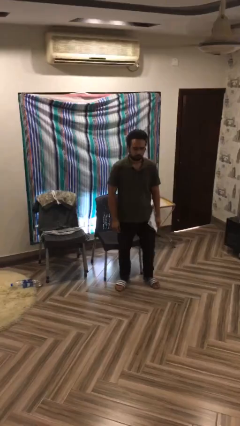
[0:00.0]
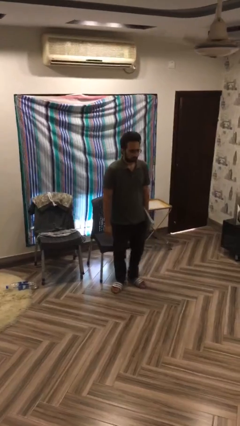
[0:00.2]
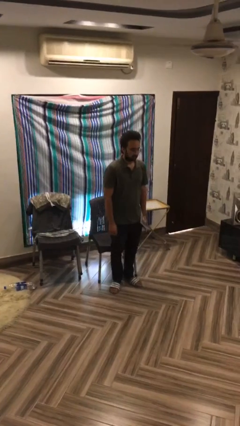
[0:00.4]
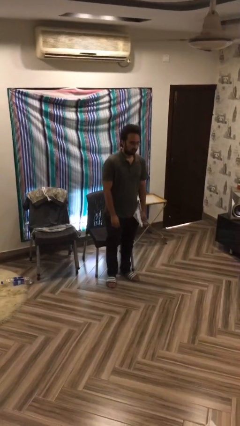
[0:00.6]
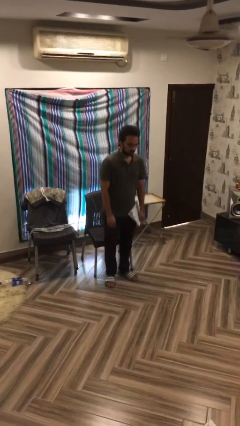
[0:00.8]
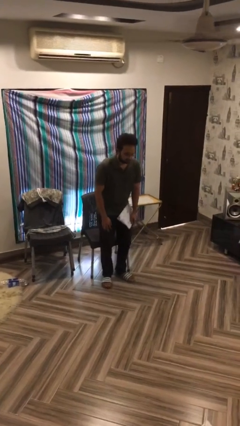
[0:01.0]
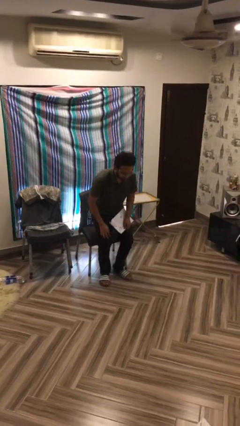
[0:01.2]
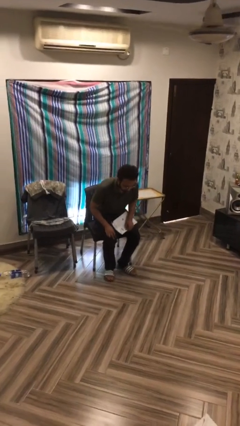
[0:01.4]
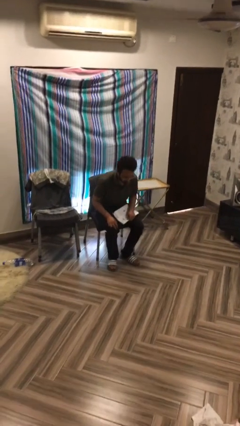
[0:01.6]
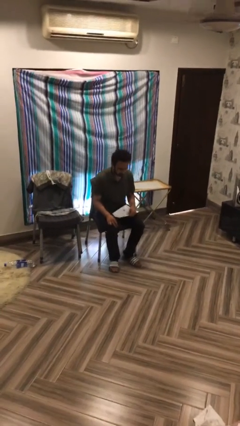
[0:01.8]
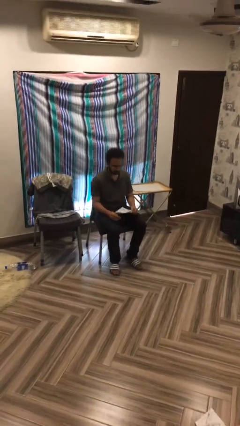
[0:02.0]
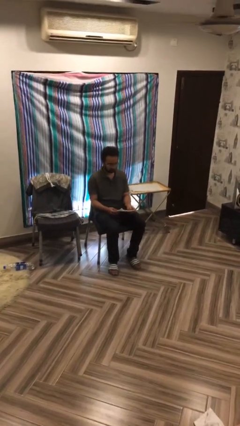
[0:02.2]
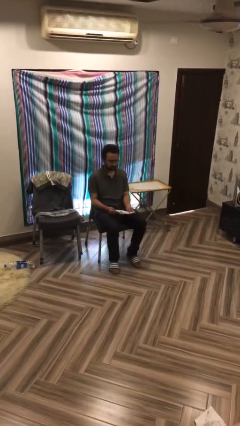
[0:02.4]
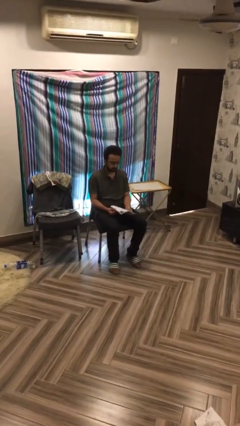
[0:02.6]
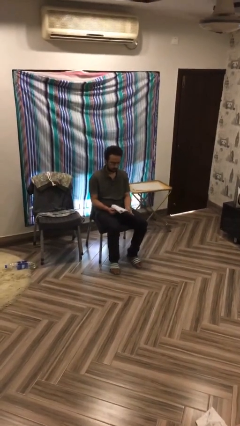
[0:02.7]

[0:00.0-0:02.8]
person sits down

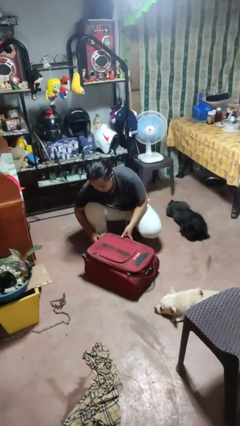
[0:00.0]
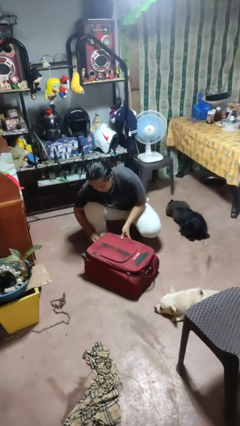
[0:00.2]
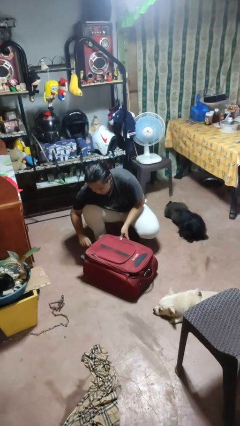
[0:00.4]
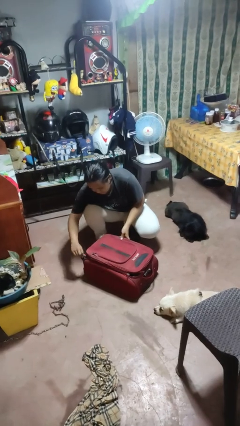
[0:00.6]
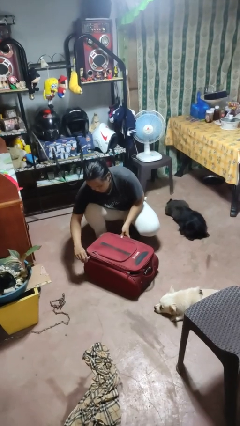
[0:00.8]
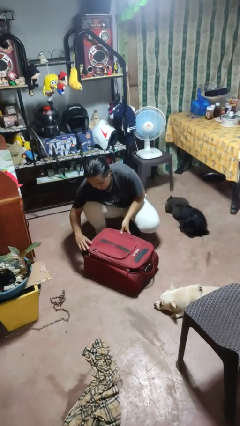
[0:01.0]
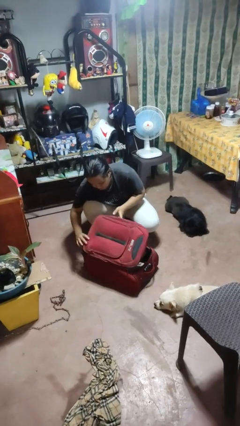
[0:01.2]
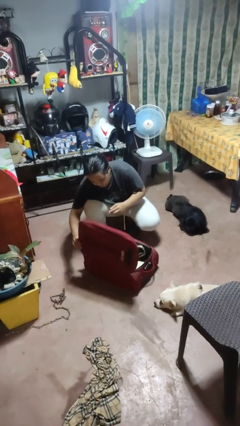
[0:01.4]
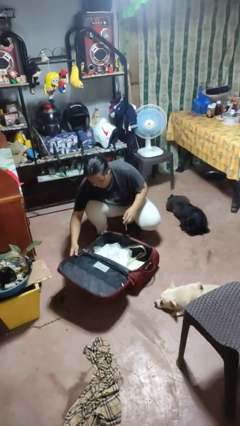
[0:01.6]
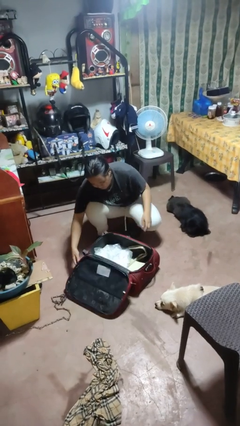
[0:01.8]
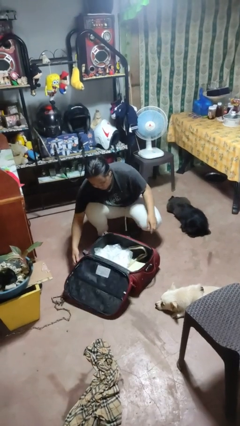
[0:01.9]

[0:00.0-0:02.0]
person opens suitcase

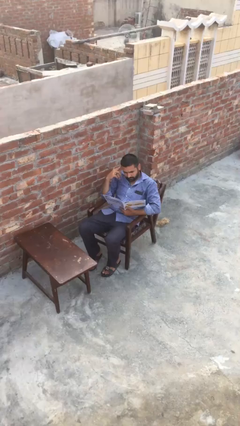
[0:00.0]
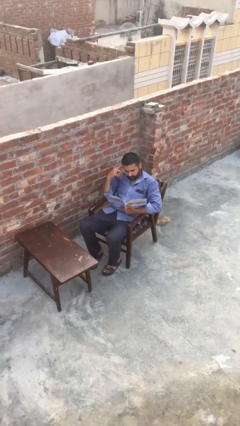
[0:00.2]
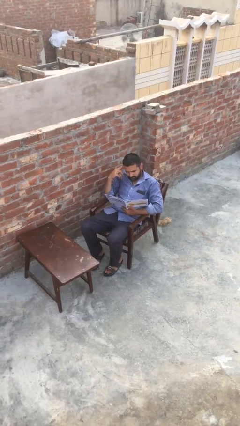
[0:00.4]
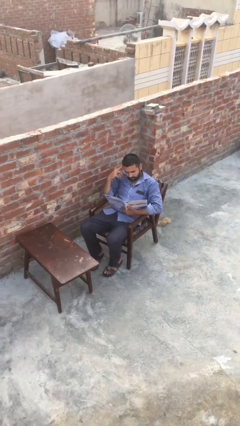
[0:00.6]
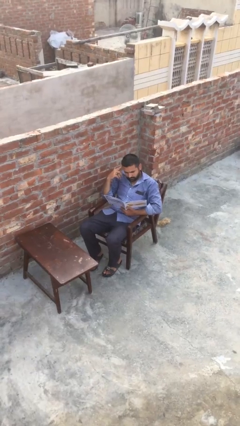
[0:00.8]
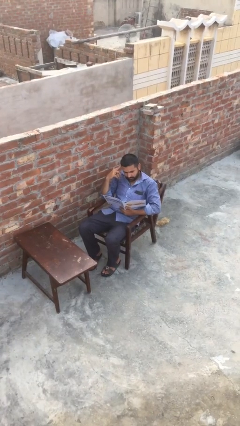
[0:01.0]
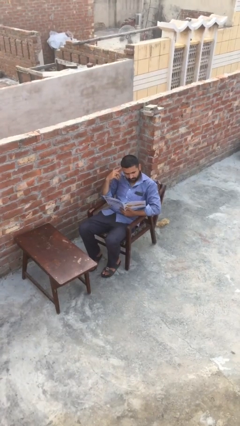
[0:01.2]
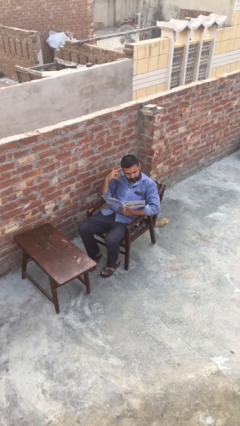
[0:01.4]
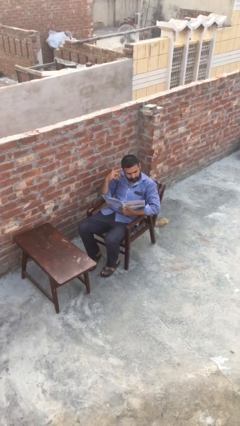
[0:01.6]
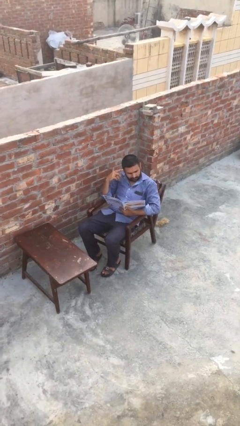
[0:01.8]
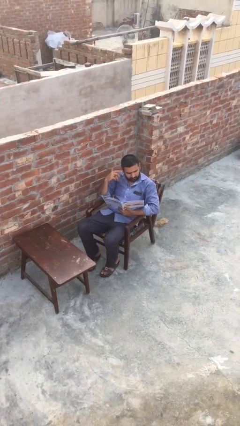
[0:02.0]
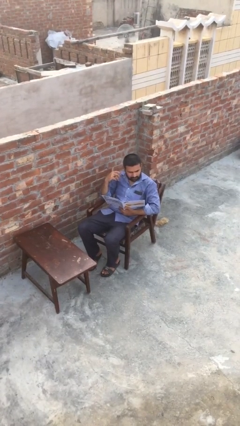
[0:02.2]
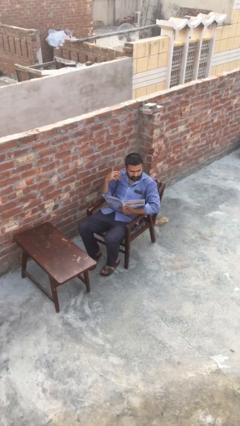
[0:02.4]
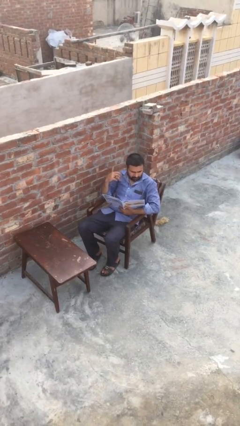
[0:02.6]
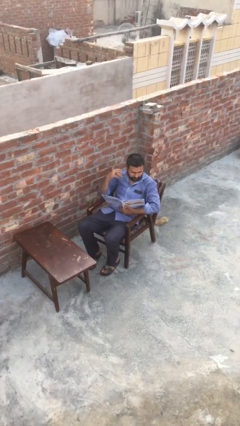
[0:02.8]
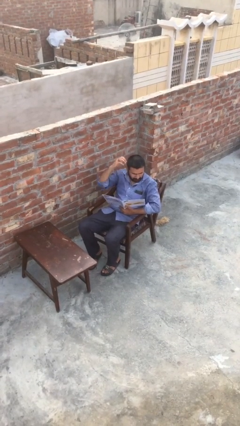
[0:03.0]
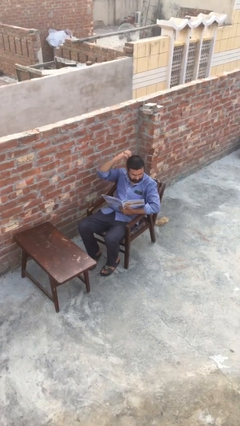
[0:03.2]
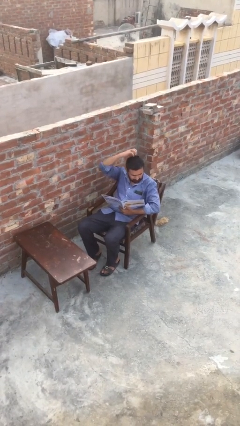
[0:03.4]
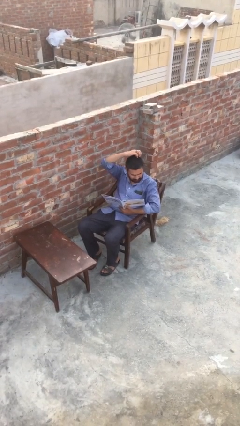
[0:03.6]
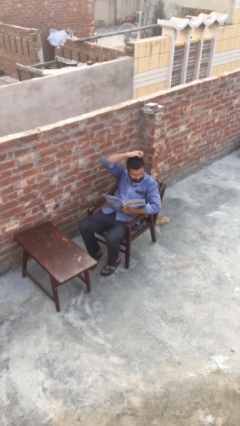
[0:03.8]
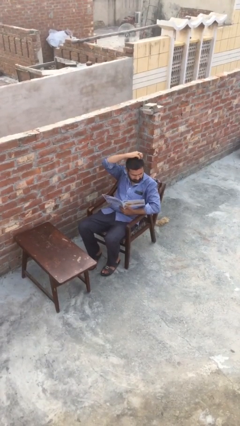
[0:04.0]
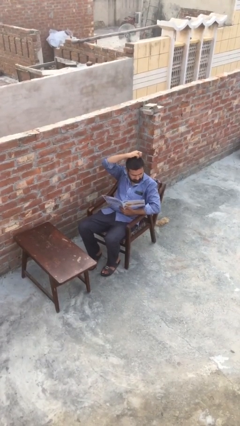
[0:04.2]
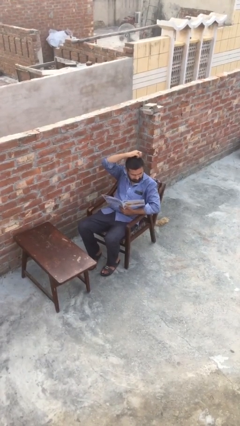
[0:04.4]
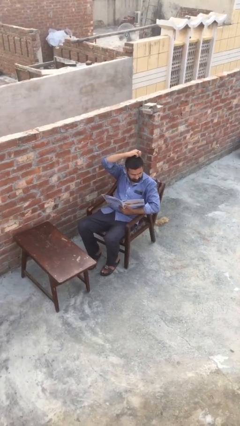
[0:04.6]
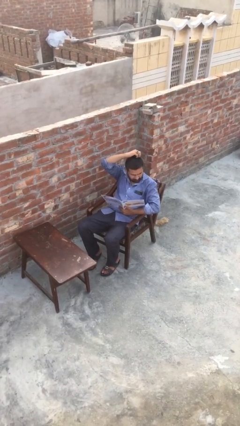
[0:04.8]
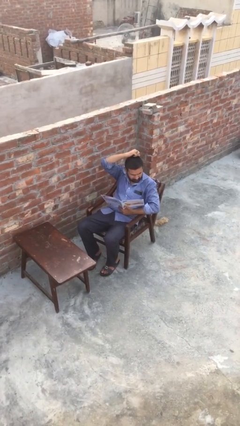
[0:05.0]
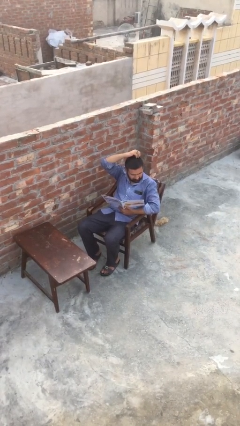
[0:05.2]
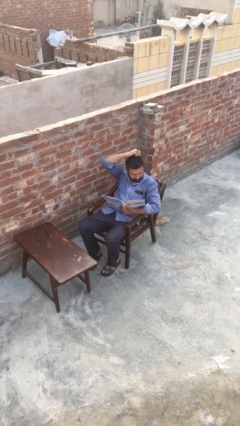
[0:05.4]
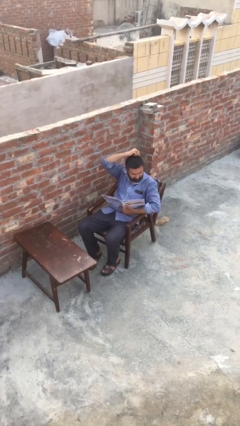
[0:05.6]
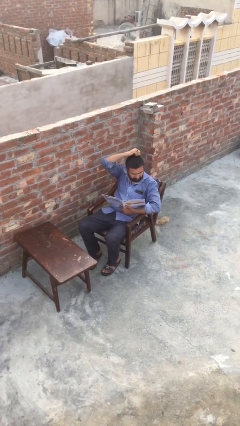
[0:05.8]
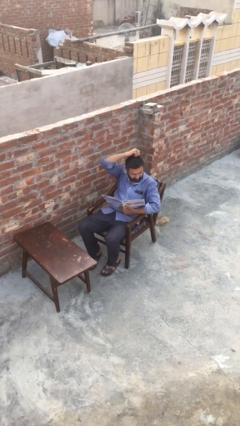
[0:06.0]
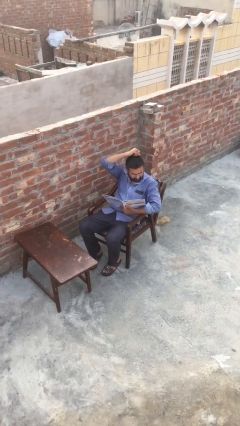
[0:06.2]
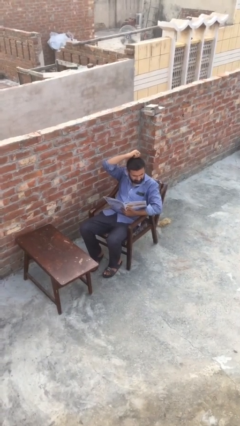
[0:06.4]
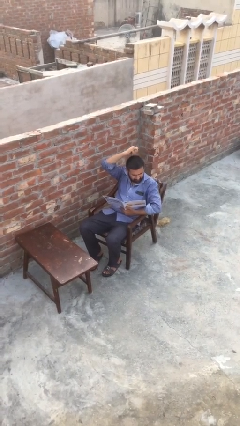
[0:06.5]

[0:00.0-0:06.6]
person reads document

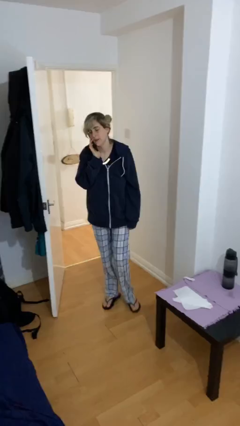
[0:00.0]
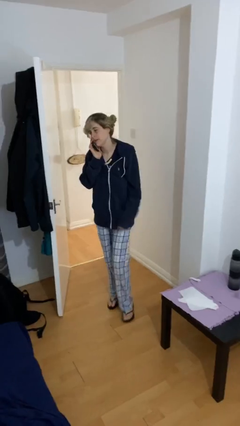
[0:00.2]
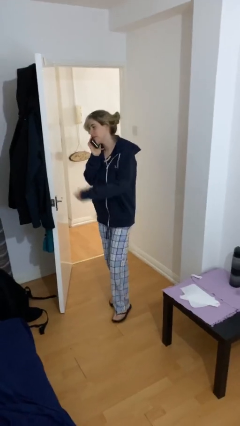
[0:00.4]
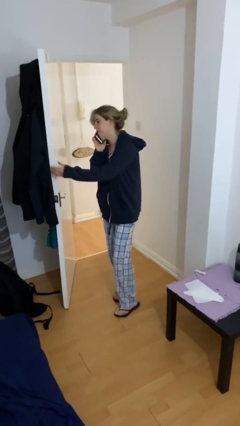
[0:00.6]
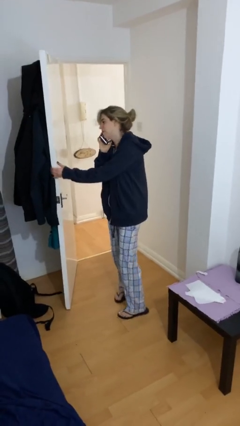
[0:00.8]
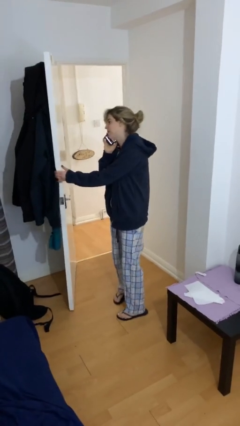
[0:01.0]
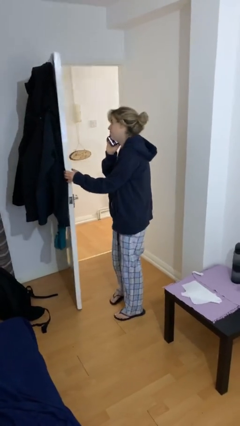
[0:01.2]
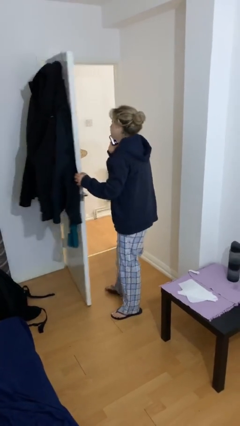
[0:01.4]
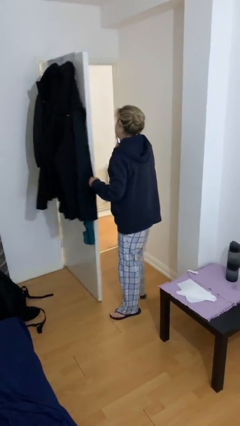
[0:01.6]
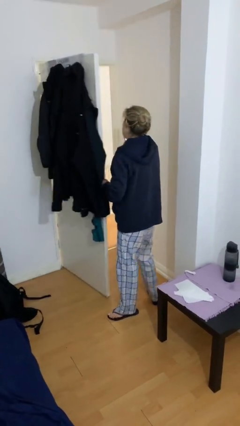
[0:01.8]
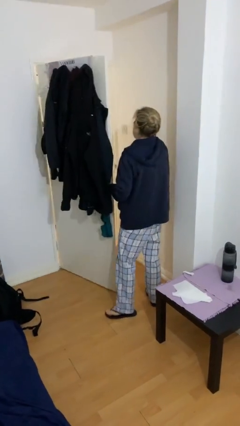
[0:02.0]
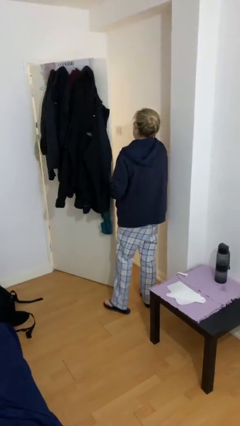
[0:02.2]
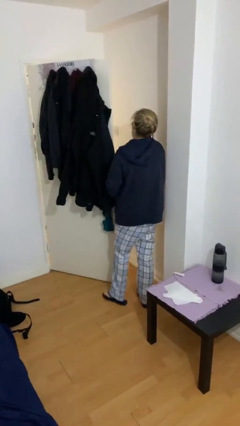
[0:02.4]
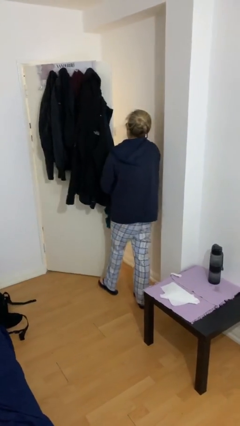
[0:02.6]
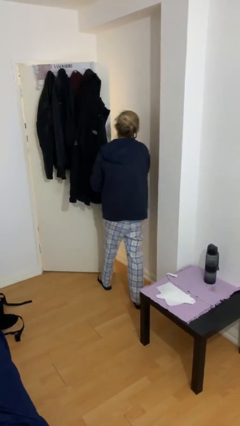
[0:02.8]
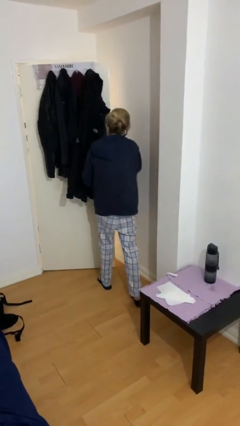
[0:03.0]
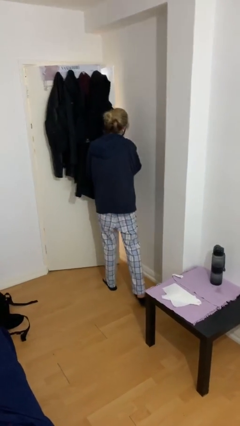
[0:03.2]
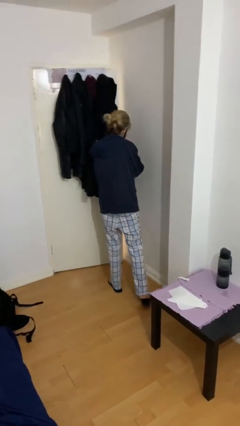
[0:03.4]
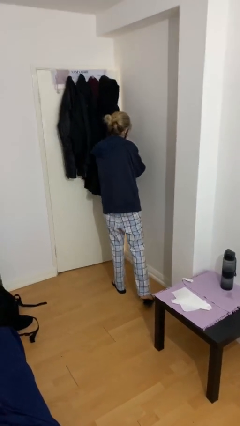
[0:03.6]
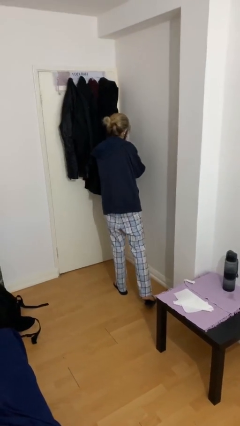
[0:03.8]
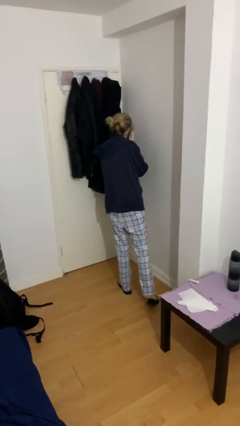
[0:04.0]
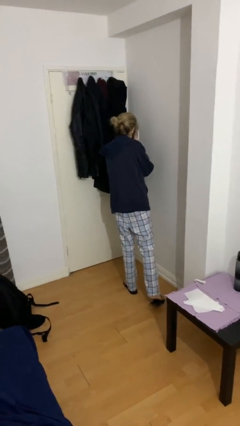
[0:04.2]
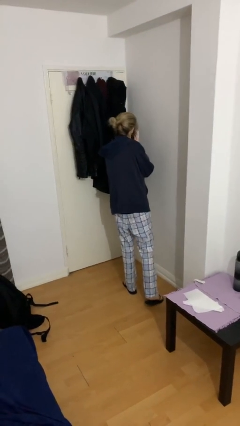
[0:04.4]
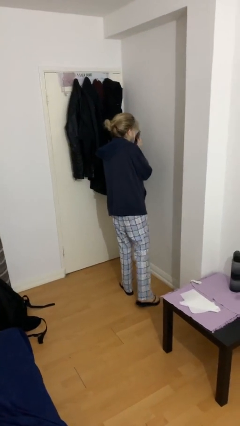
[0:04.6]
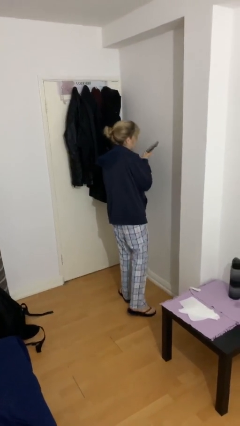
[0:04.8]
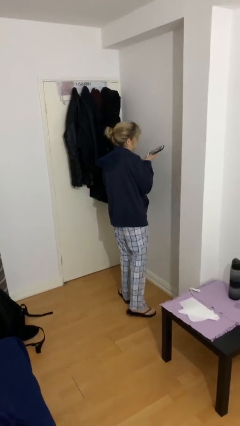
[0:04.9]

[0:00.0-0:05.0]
person closes facility door

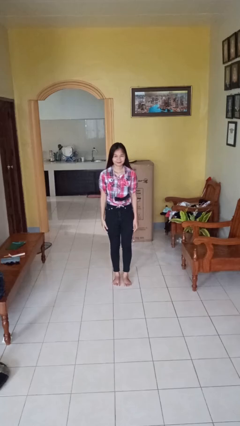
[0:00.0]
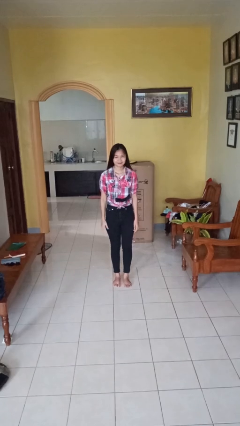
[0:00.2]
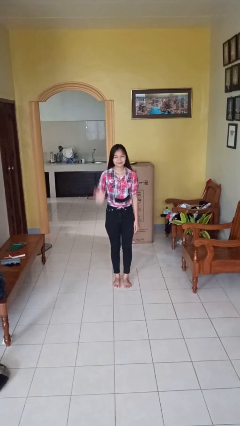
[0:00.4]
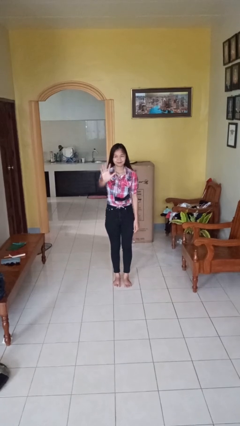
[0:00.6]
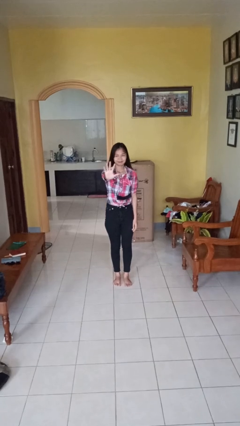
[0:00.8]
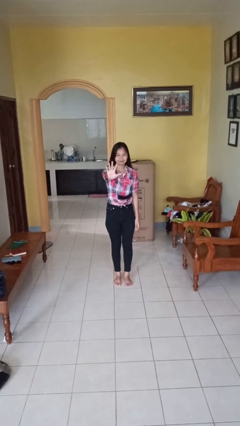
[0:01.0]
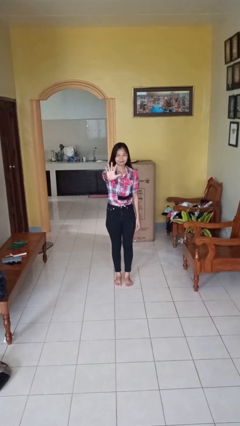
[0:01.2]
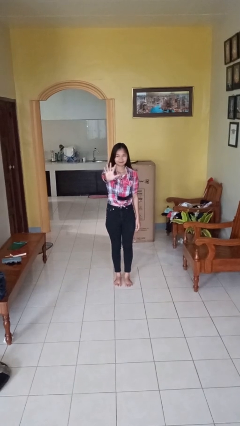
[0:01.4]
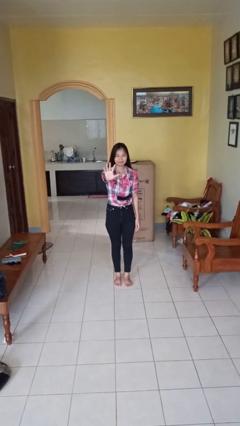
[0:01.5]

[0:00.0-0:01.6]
person gestures number five
